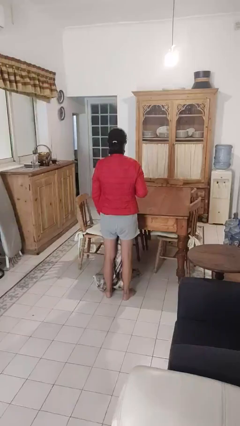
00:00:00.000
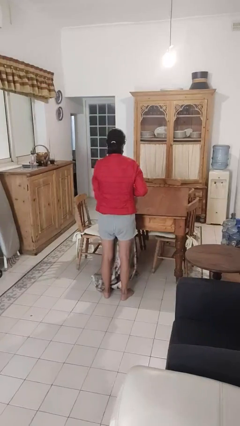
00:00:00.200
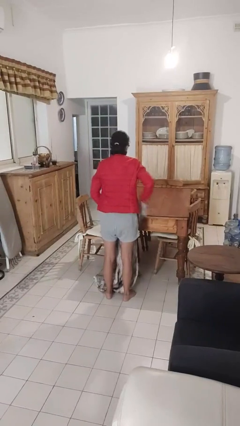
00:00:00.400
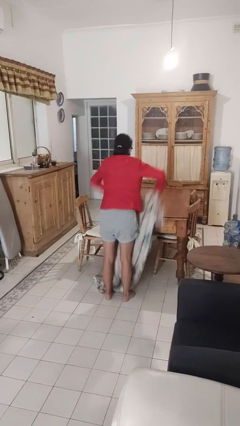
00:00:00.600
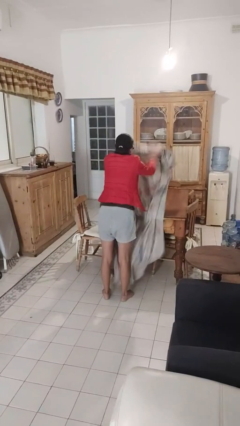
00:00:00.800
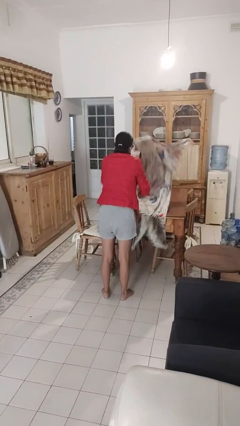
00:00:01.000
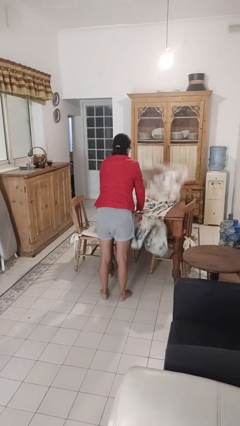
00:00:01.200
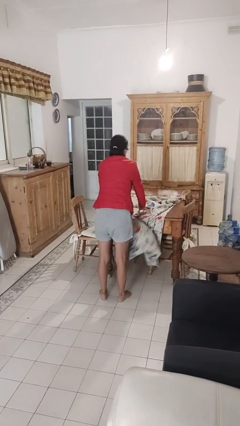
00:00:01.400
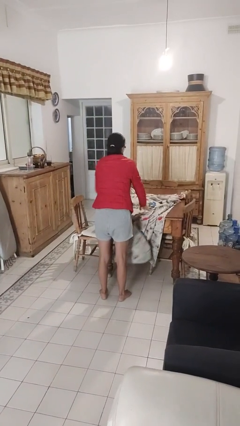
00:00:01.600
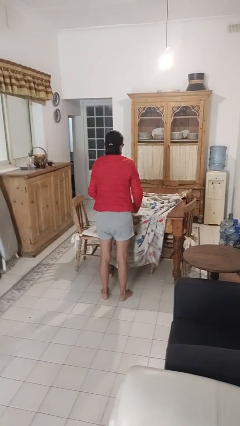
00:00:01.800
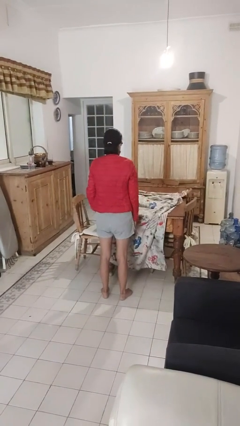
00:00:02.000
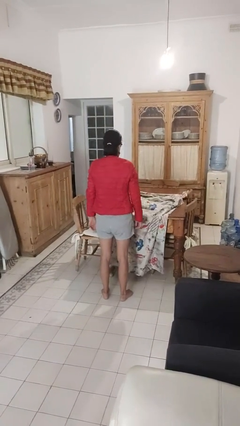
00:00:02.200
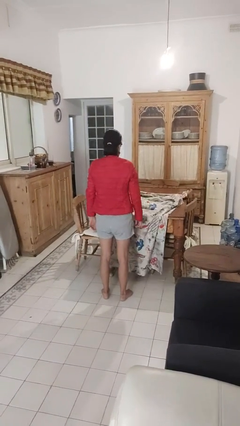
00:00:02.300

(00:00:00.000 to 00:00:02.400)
person spreads tablecloth

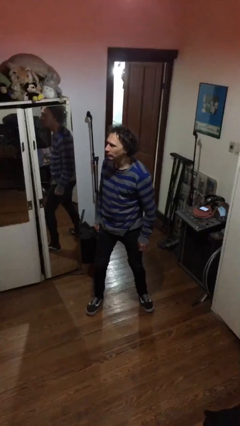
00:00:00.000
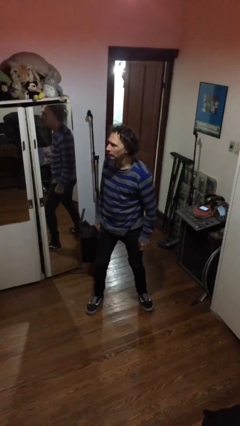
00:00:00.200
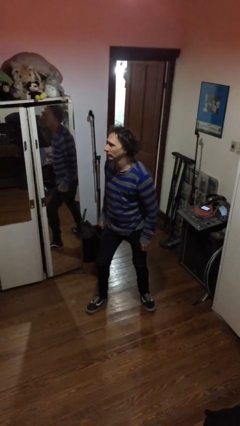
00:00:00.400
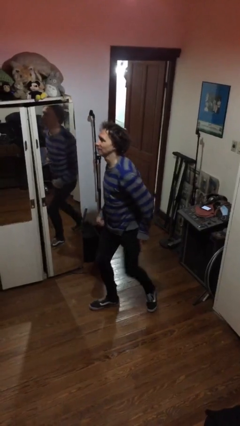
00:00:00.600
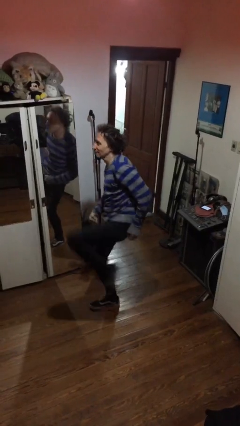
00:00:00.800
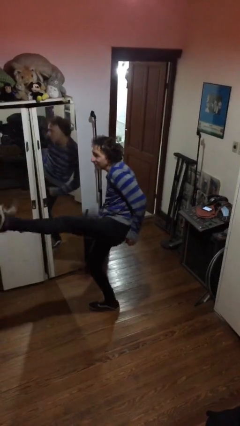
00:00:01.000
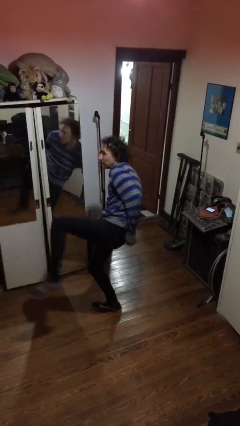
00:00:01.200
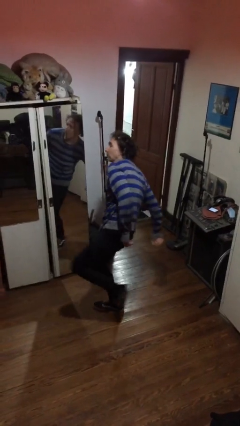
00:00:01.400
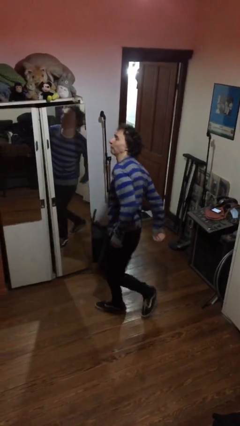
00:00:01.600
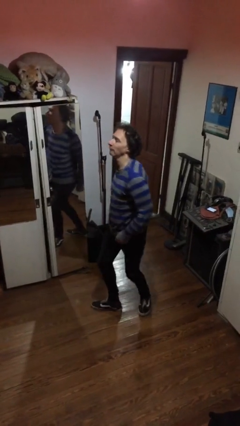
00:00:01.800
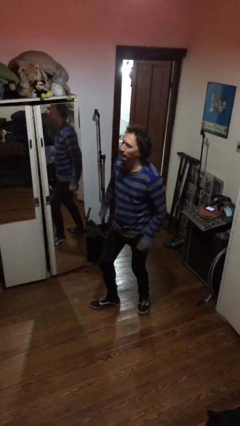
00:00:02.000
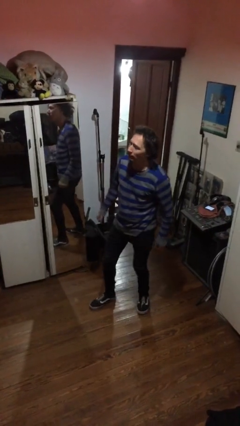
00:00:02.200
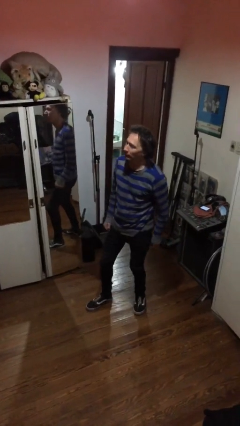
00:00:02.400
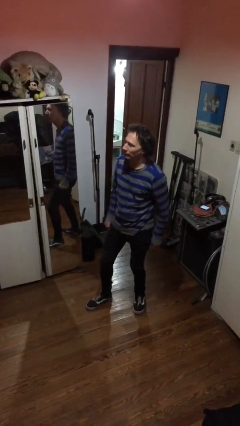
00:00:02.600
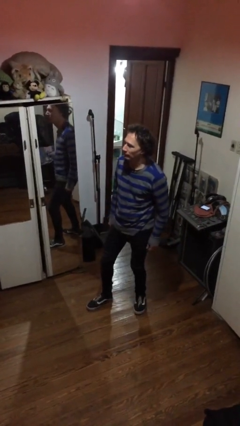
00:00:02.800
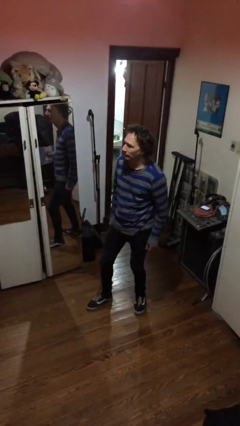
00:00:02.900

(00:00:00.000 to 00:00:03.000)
person karate kicks

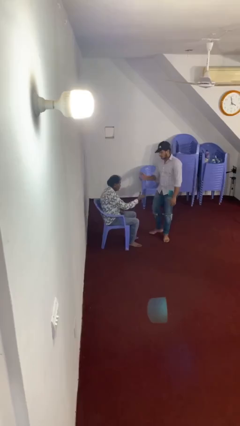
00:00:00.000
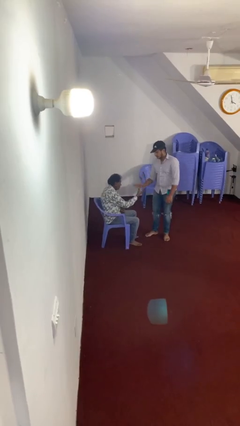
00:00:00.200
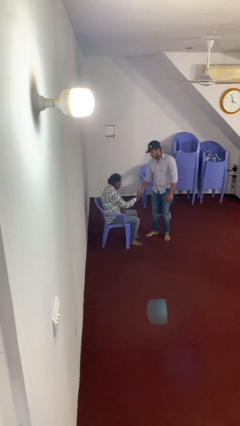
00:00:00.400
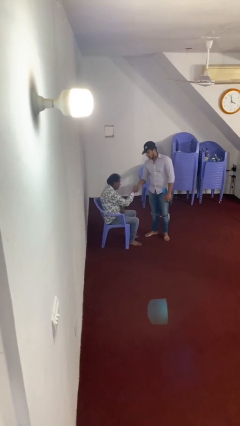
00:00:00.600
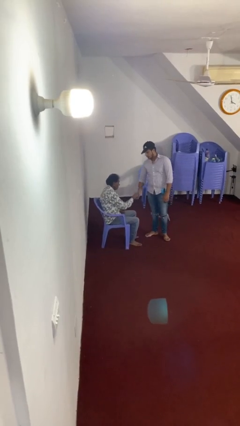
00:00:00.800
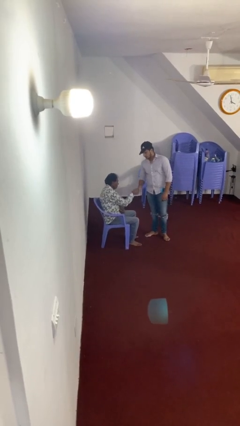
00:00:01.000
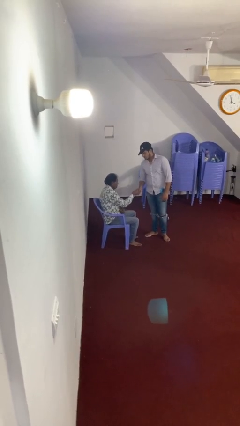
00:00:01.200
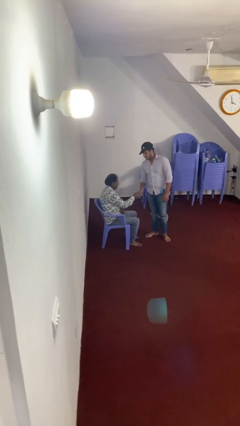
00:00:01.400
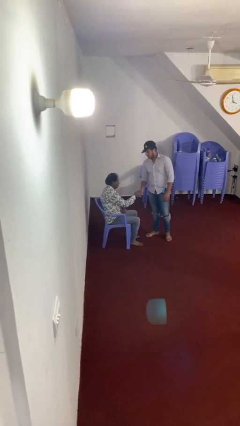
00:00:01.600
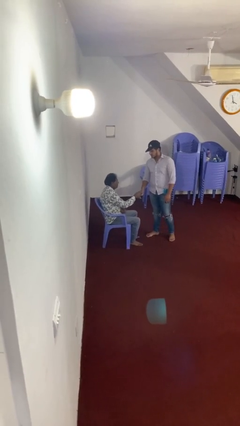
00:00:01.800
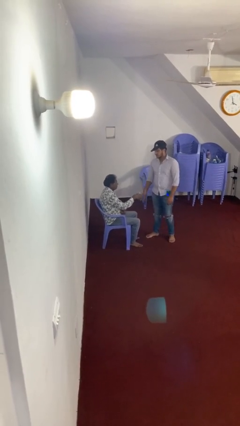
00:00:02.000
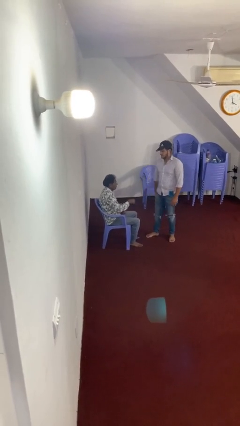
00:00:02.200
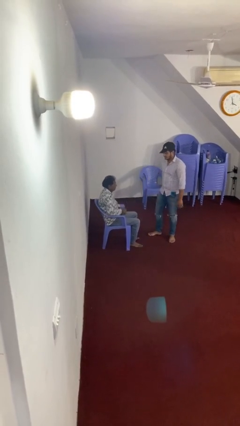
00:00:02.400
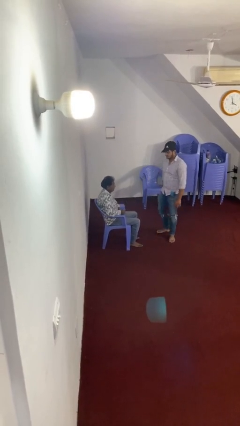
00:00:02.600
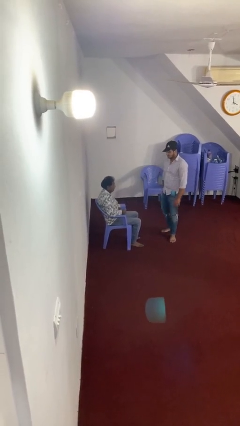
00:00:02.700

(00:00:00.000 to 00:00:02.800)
person shakes hand

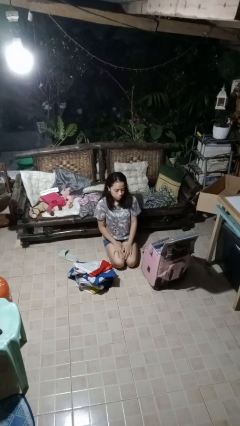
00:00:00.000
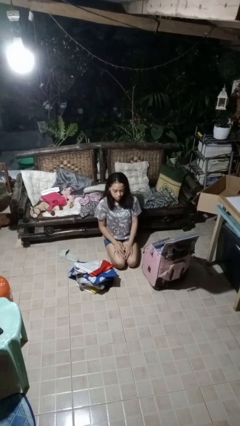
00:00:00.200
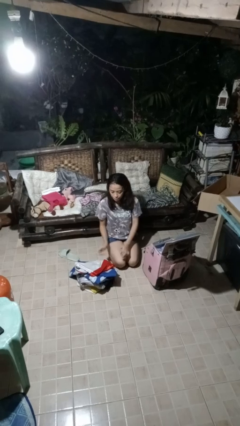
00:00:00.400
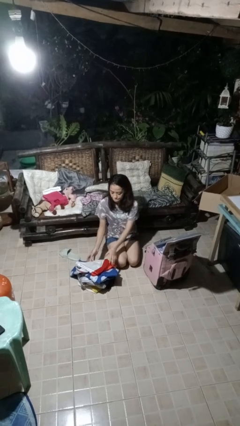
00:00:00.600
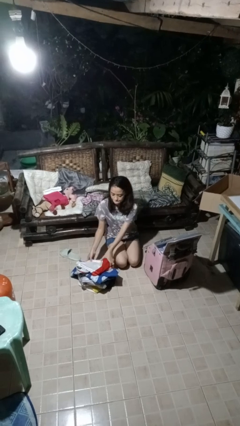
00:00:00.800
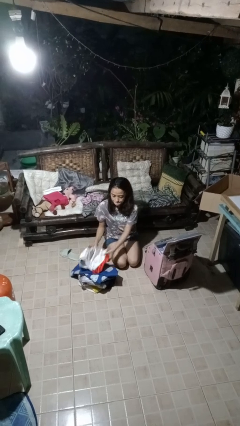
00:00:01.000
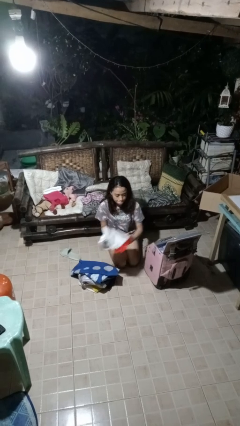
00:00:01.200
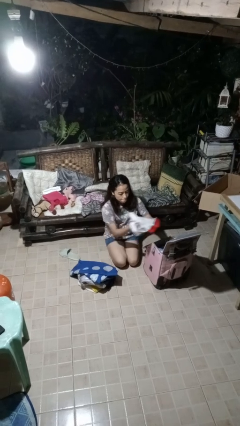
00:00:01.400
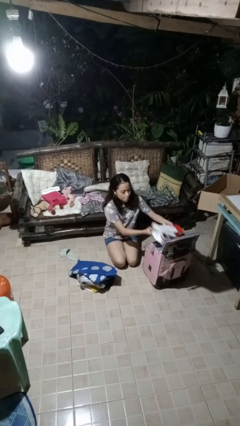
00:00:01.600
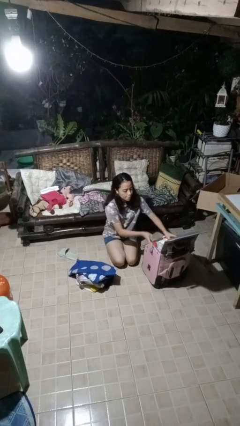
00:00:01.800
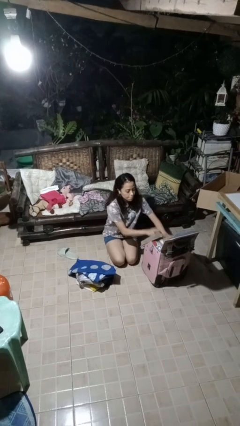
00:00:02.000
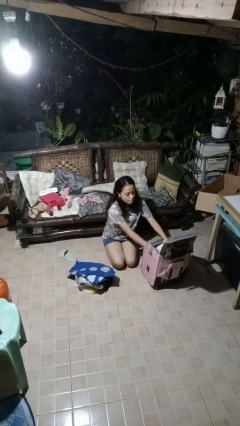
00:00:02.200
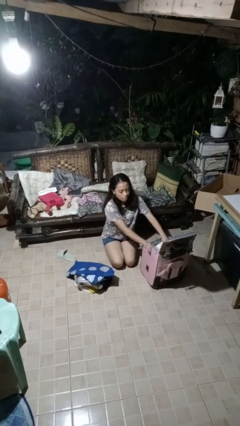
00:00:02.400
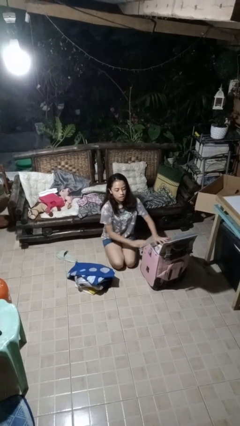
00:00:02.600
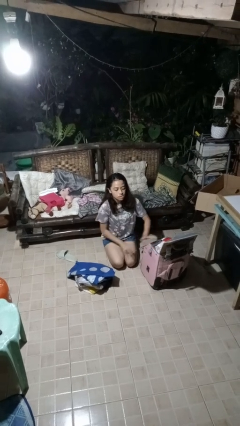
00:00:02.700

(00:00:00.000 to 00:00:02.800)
person loads clothes into suitcase

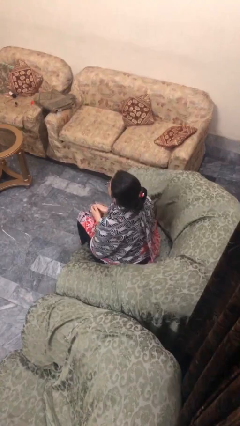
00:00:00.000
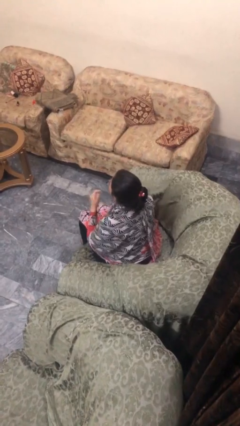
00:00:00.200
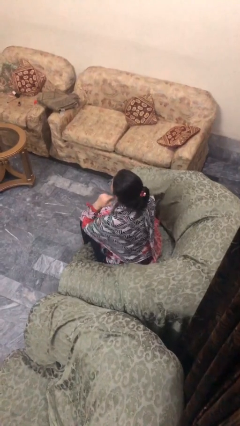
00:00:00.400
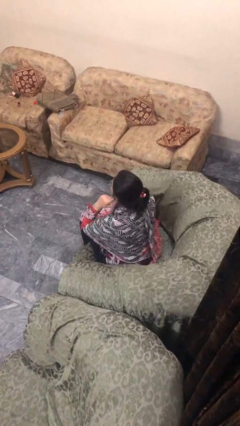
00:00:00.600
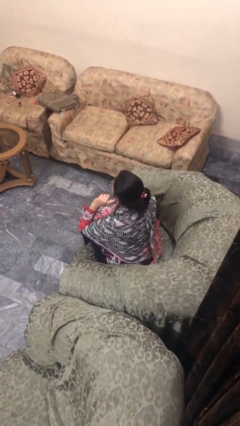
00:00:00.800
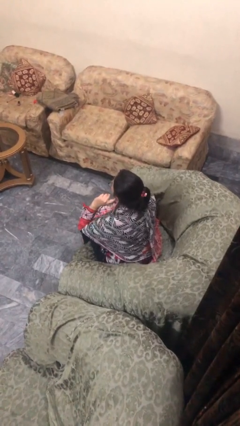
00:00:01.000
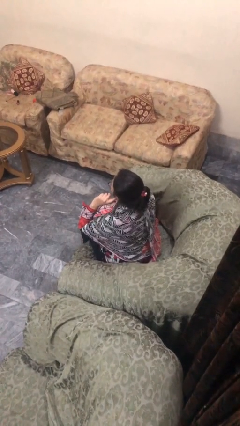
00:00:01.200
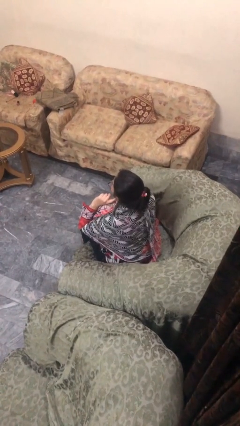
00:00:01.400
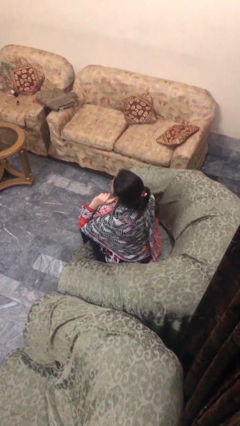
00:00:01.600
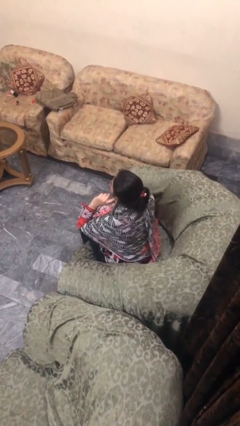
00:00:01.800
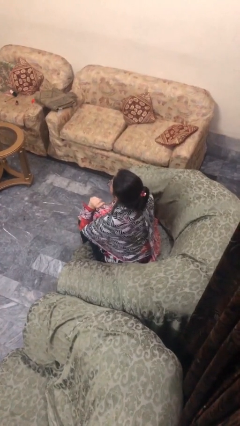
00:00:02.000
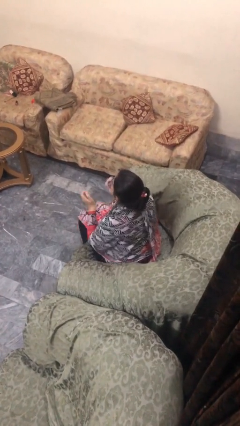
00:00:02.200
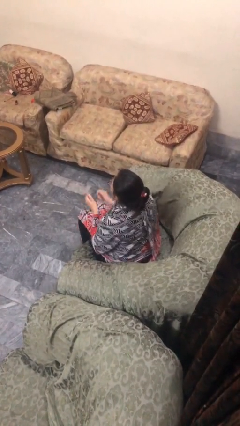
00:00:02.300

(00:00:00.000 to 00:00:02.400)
person puts fingers in ear

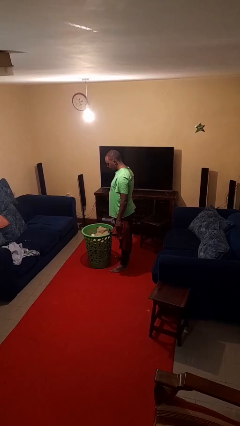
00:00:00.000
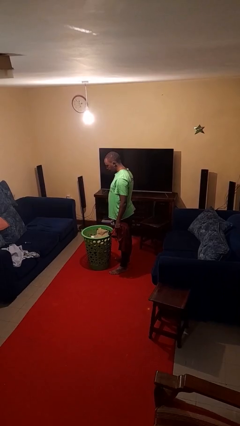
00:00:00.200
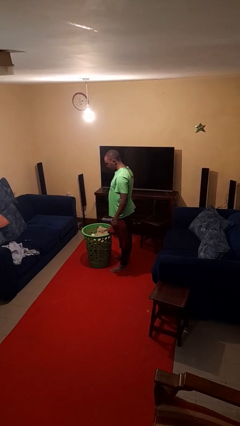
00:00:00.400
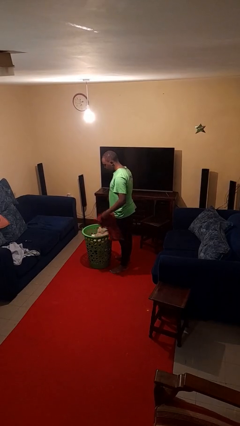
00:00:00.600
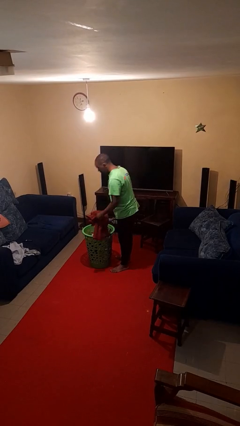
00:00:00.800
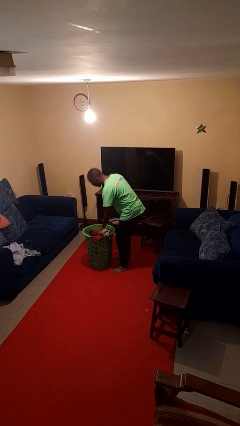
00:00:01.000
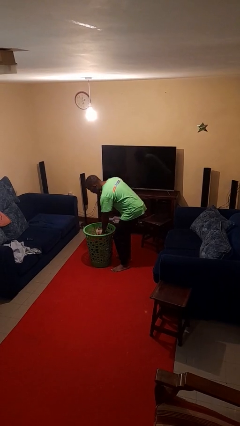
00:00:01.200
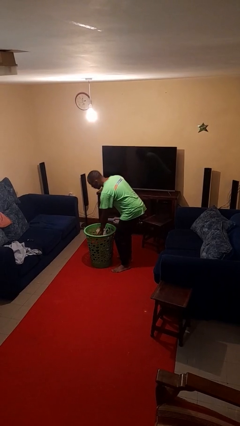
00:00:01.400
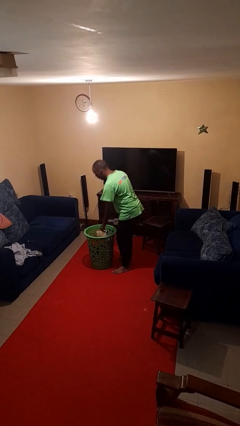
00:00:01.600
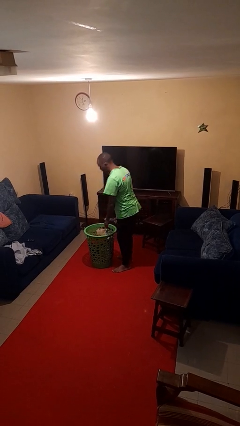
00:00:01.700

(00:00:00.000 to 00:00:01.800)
person puts object into basket

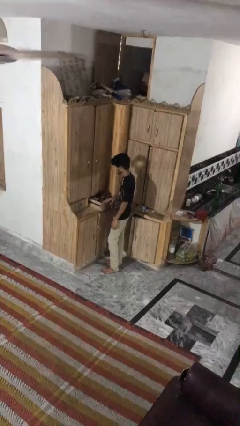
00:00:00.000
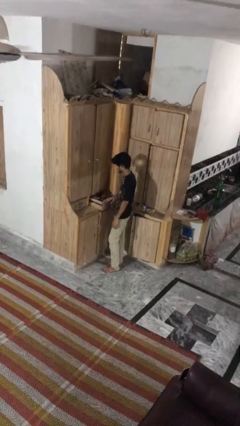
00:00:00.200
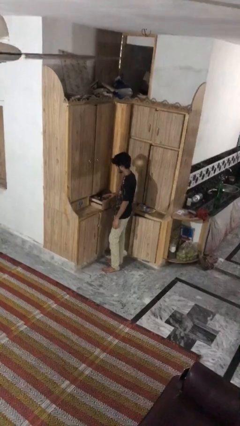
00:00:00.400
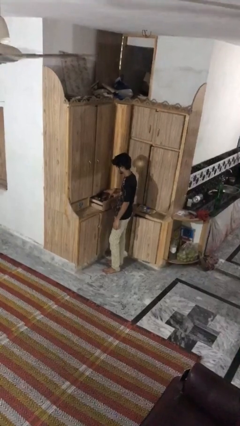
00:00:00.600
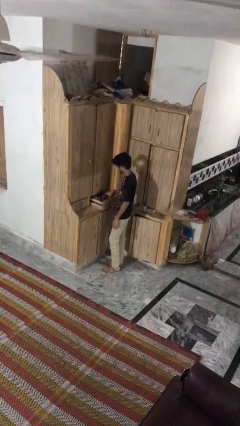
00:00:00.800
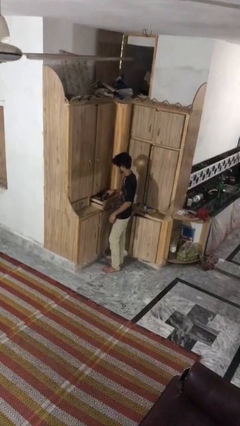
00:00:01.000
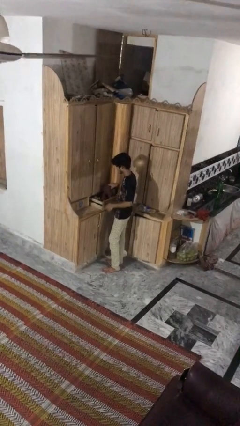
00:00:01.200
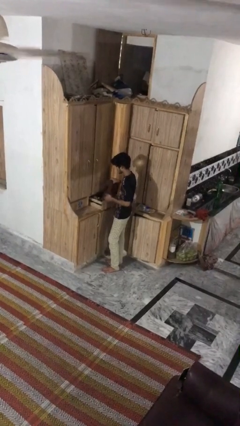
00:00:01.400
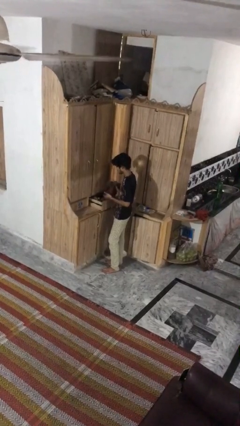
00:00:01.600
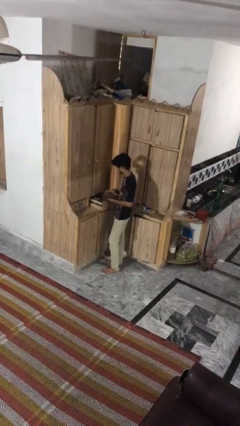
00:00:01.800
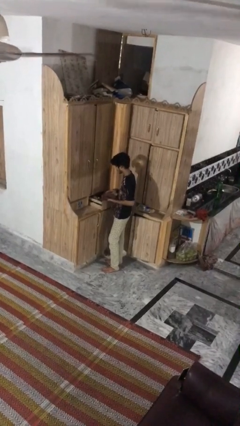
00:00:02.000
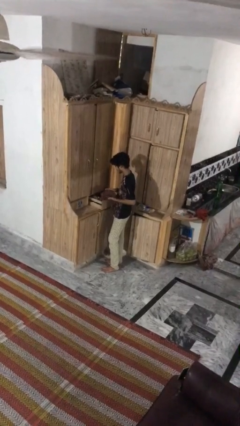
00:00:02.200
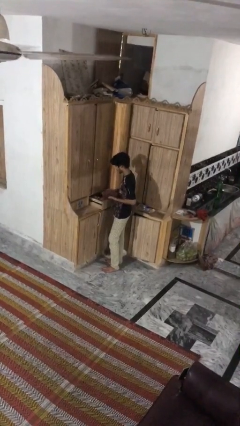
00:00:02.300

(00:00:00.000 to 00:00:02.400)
person takes clothes from dresser
